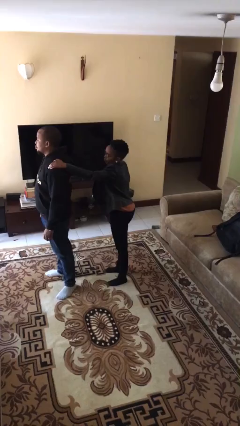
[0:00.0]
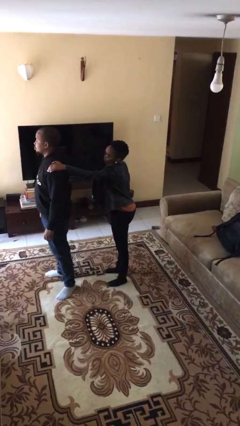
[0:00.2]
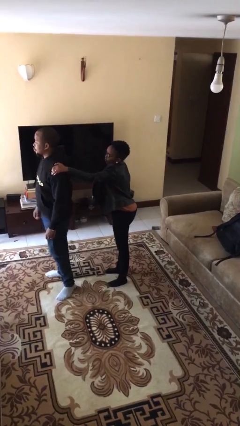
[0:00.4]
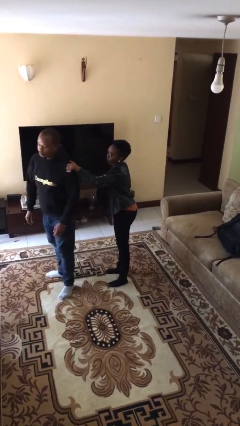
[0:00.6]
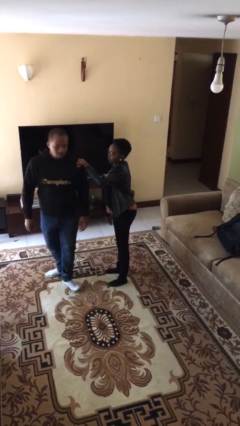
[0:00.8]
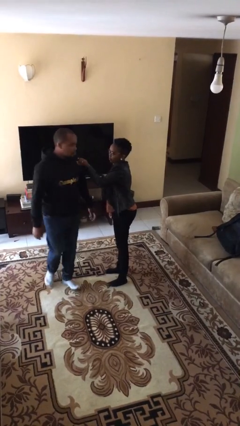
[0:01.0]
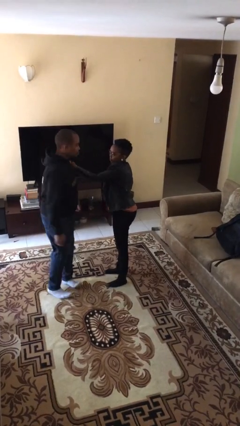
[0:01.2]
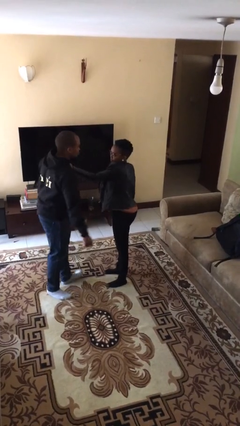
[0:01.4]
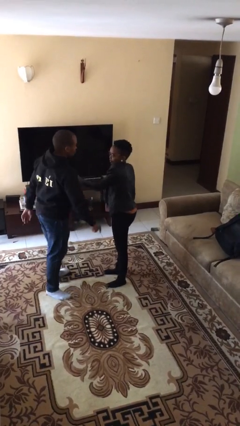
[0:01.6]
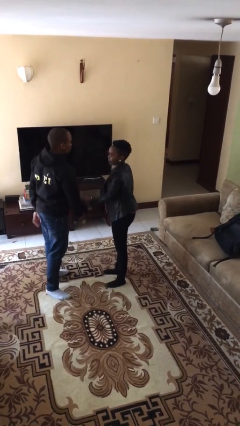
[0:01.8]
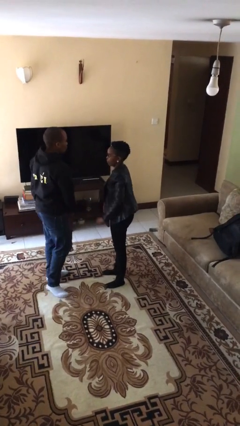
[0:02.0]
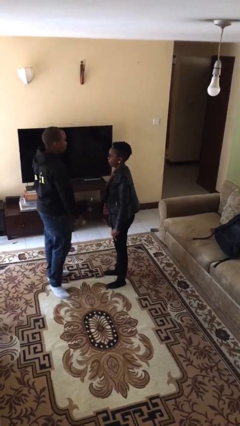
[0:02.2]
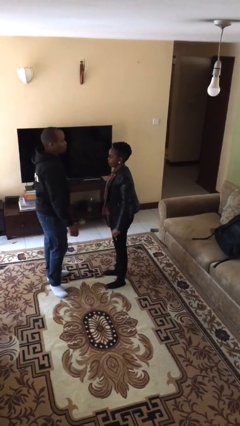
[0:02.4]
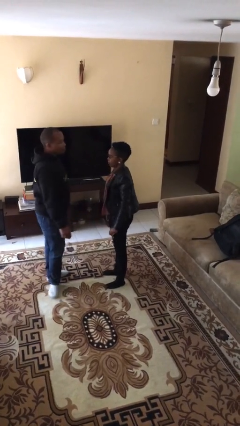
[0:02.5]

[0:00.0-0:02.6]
person spins person around

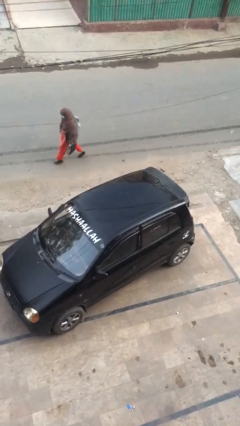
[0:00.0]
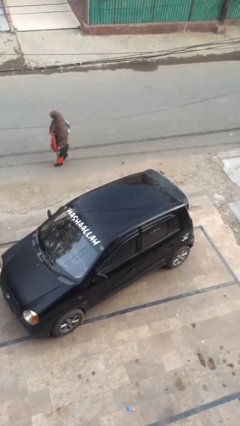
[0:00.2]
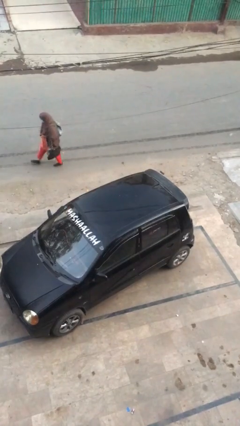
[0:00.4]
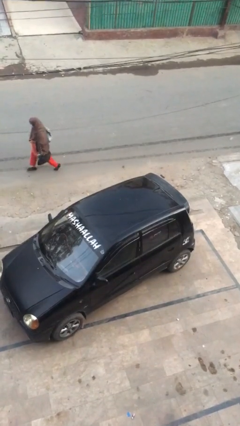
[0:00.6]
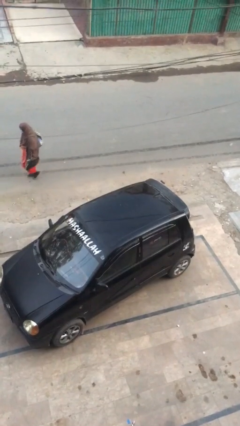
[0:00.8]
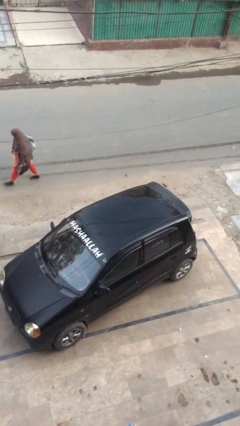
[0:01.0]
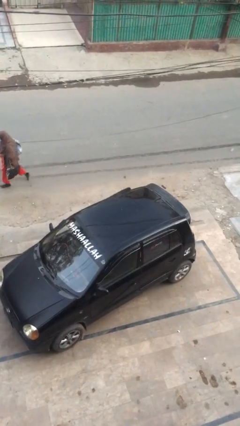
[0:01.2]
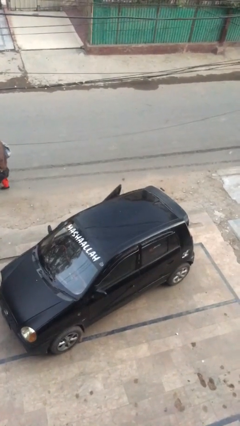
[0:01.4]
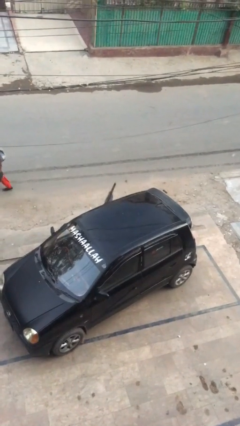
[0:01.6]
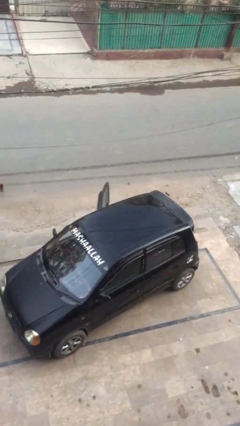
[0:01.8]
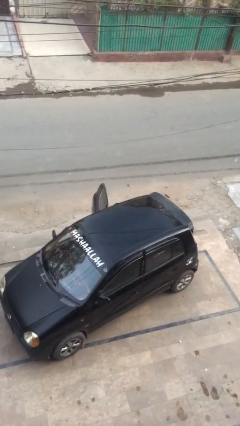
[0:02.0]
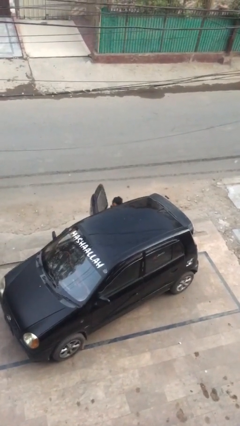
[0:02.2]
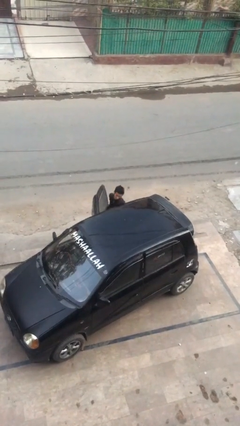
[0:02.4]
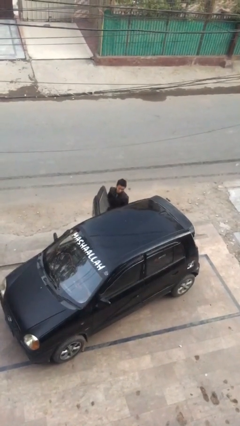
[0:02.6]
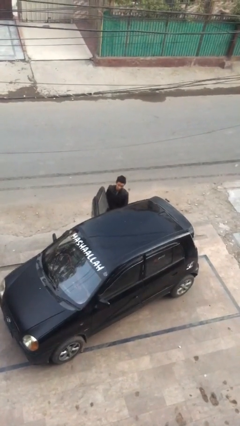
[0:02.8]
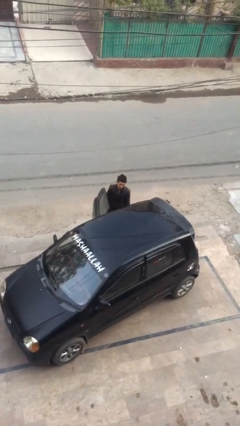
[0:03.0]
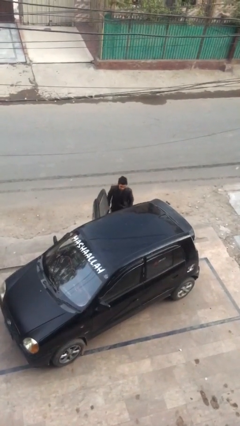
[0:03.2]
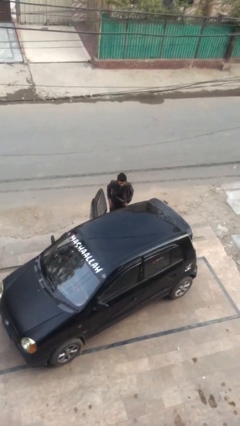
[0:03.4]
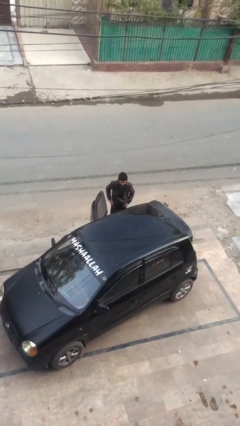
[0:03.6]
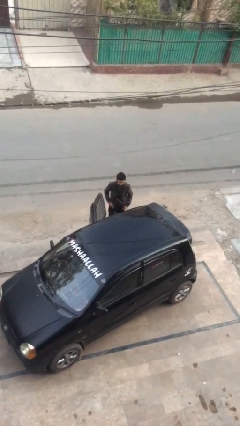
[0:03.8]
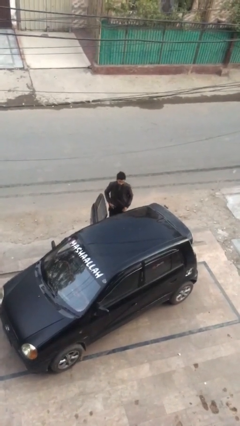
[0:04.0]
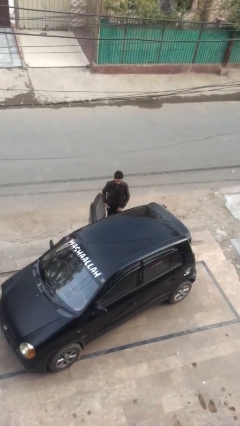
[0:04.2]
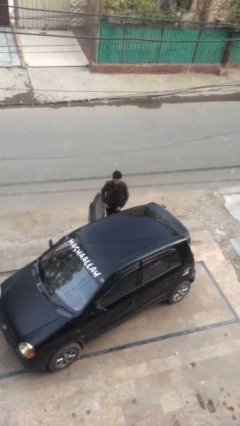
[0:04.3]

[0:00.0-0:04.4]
person exits car

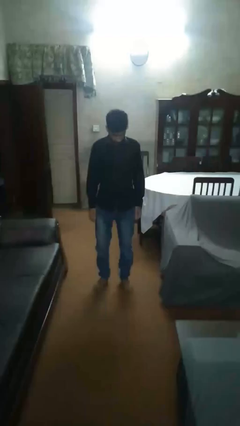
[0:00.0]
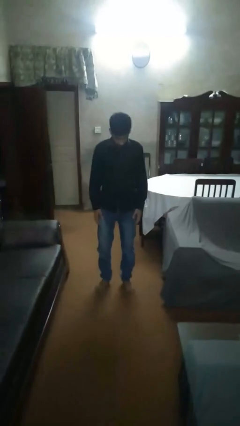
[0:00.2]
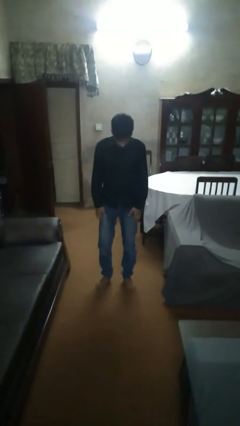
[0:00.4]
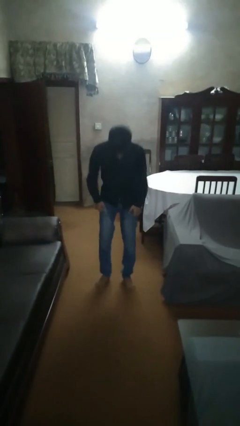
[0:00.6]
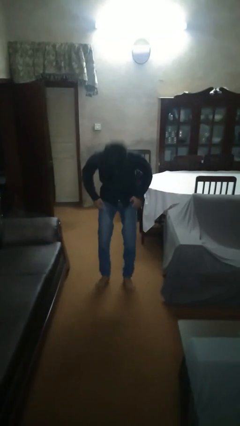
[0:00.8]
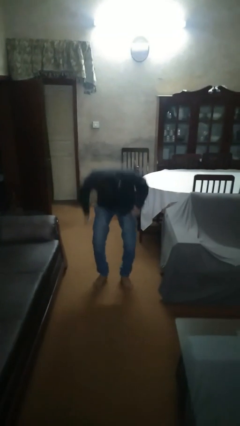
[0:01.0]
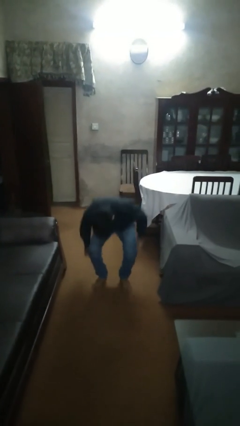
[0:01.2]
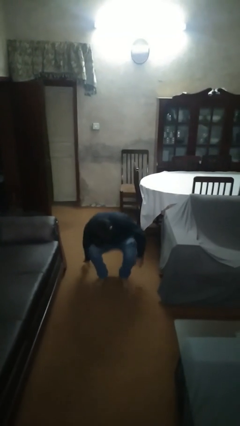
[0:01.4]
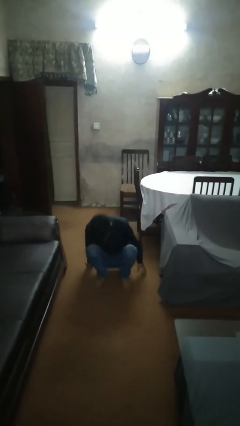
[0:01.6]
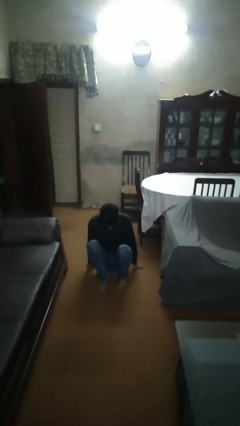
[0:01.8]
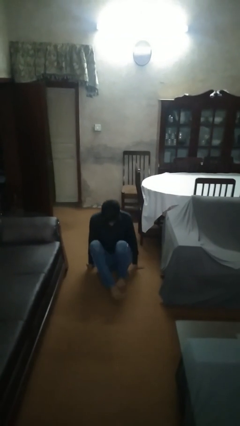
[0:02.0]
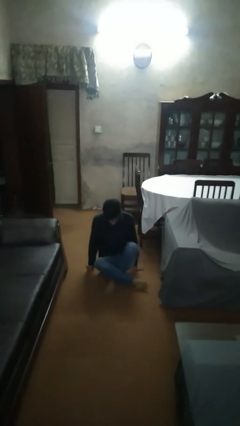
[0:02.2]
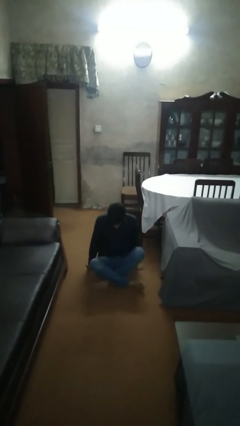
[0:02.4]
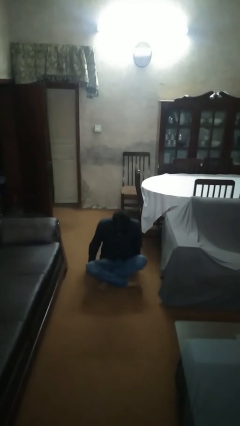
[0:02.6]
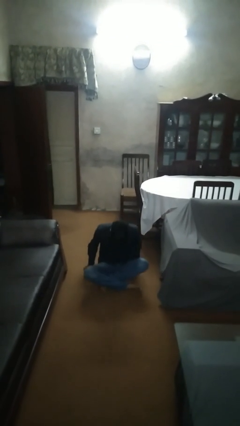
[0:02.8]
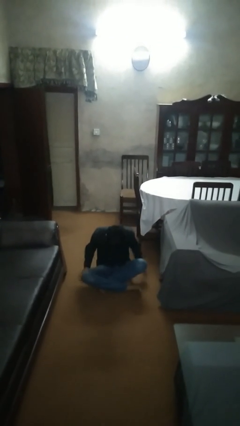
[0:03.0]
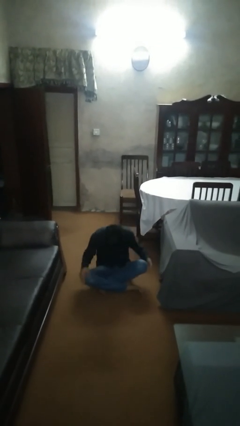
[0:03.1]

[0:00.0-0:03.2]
person sits crisscross

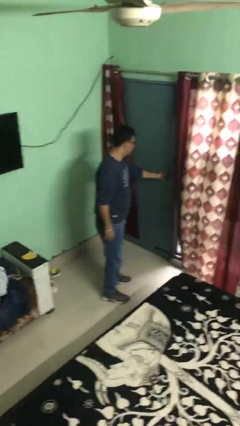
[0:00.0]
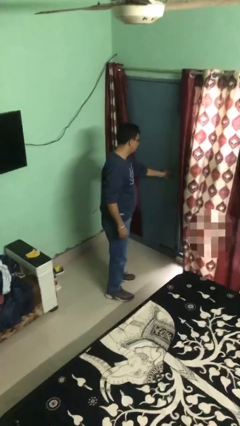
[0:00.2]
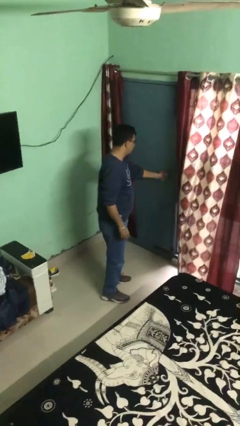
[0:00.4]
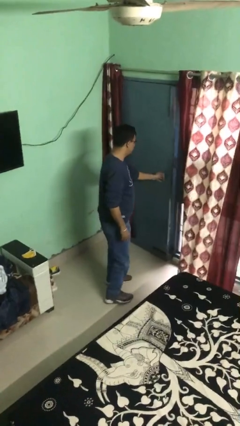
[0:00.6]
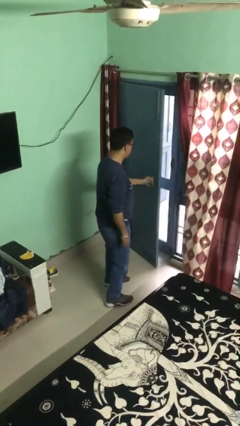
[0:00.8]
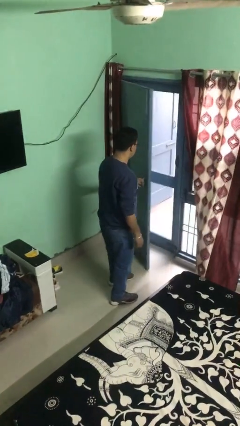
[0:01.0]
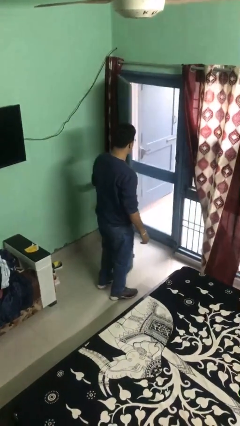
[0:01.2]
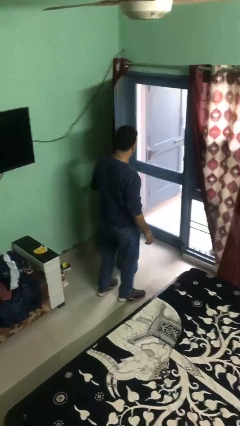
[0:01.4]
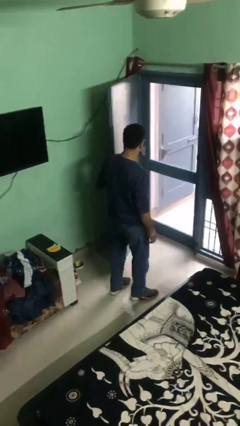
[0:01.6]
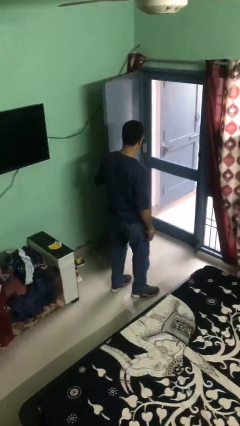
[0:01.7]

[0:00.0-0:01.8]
person opens facility door

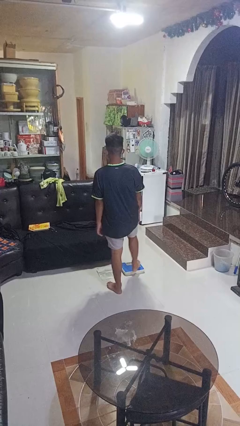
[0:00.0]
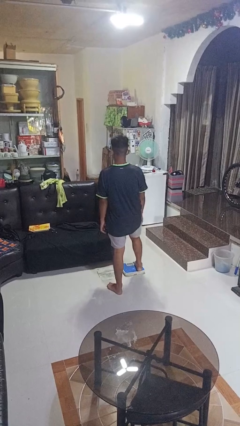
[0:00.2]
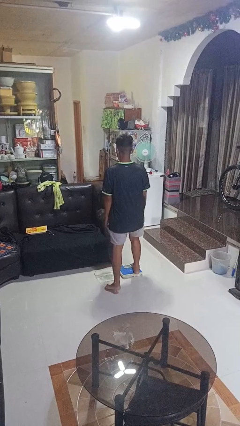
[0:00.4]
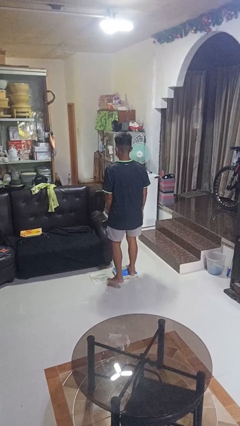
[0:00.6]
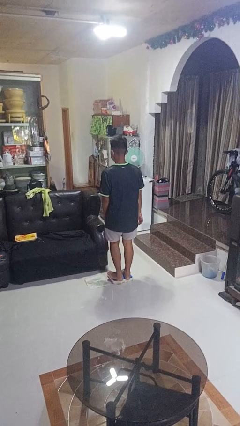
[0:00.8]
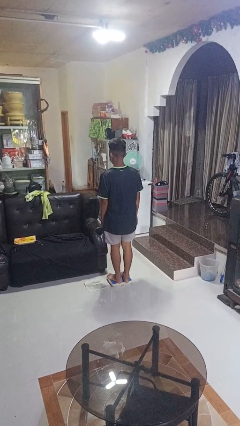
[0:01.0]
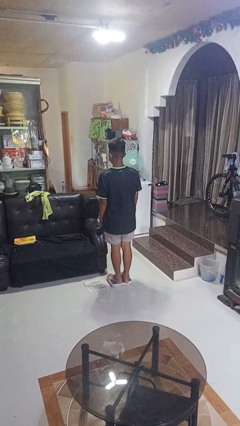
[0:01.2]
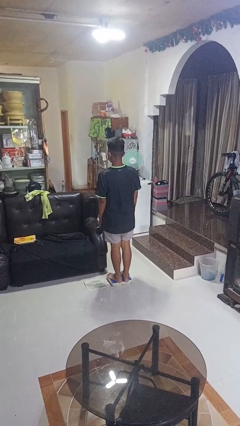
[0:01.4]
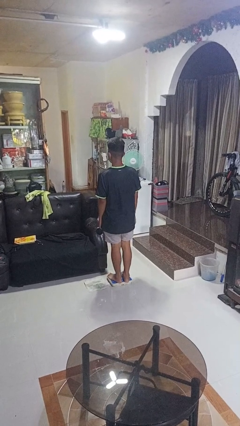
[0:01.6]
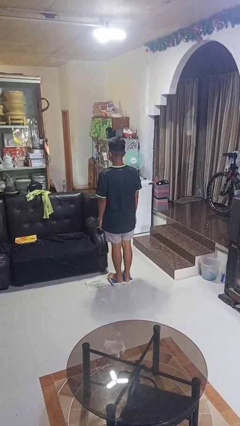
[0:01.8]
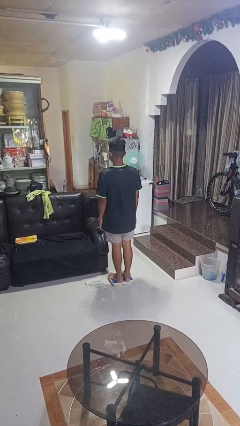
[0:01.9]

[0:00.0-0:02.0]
person uses bodyweight scale

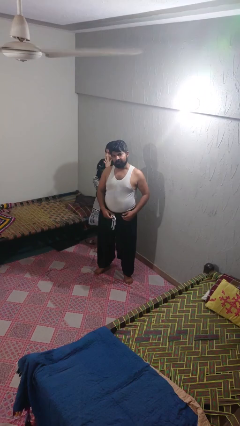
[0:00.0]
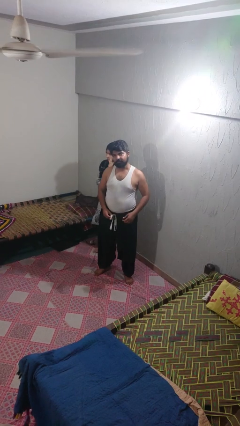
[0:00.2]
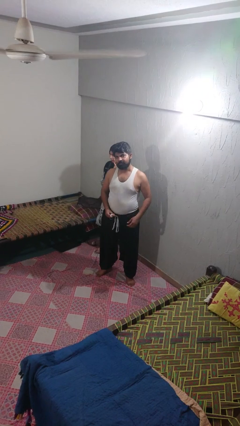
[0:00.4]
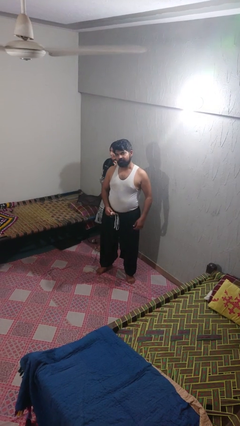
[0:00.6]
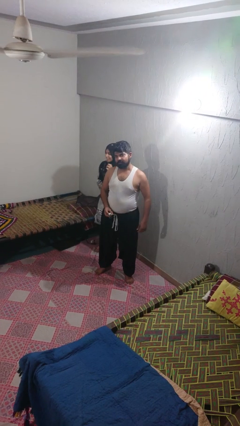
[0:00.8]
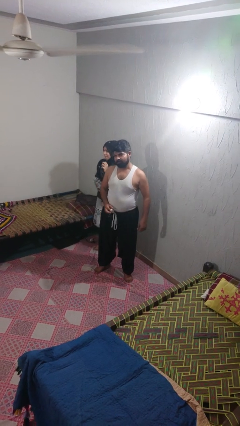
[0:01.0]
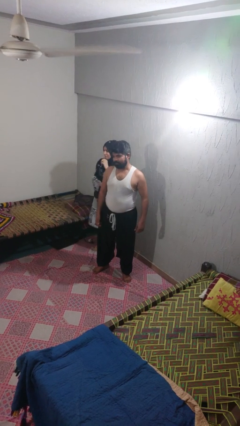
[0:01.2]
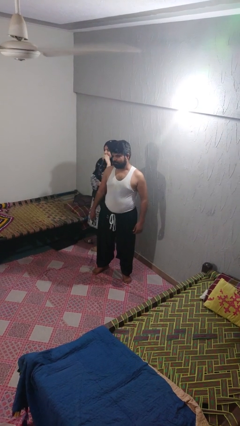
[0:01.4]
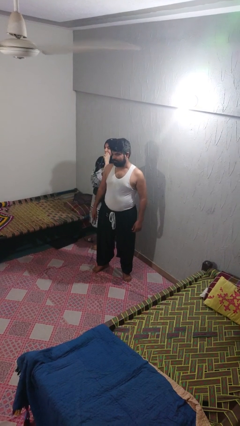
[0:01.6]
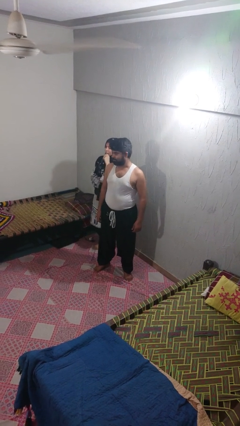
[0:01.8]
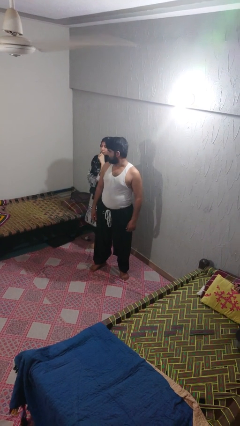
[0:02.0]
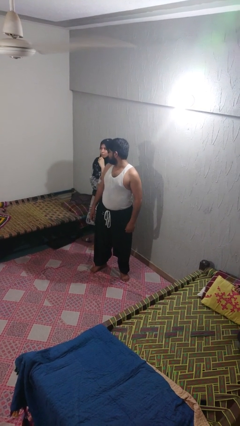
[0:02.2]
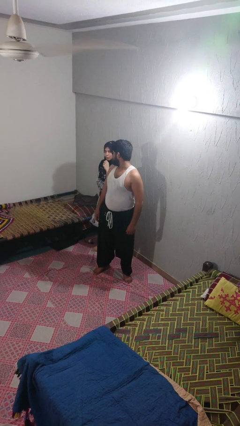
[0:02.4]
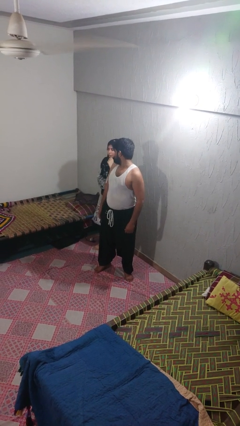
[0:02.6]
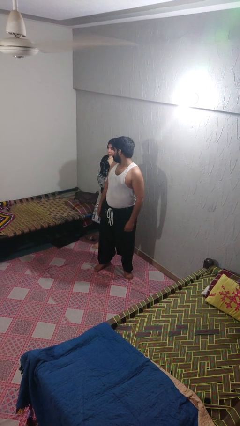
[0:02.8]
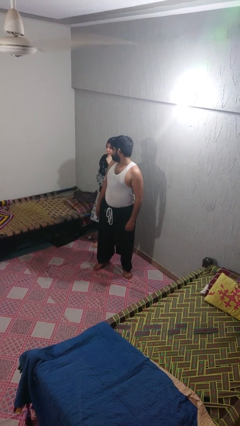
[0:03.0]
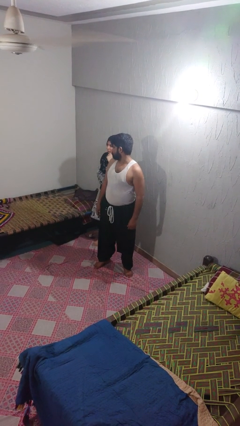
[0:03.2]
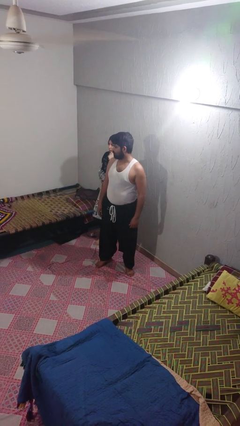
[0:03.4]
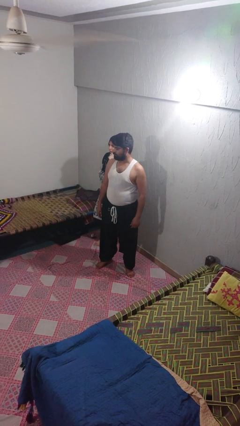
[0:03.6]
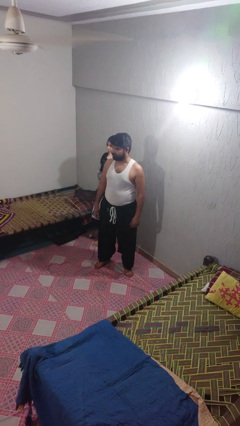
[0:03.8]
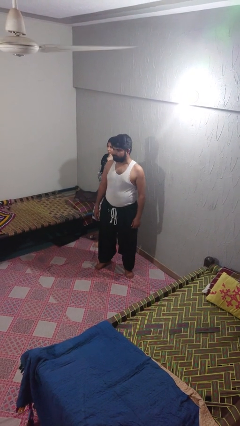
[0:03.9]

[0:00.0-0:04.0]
person looks over shoulder
